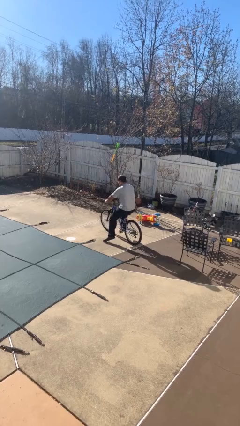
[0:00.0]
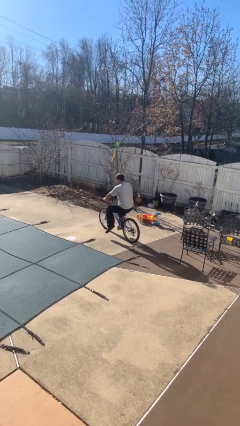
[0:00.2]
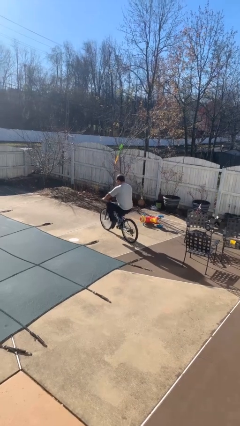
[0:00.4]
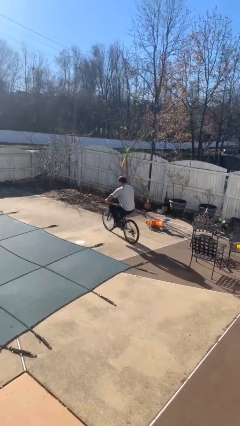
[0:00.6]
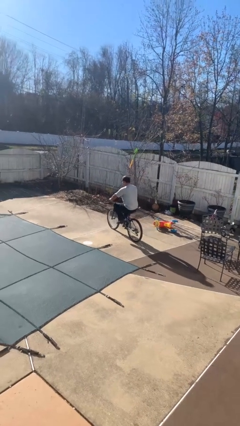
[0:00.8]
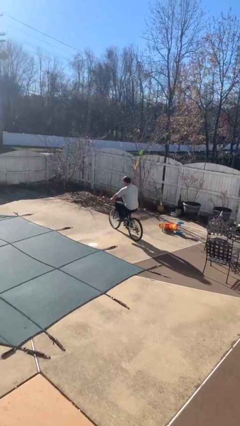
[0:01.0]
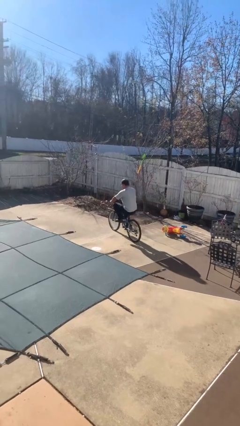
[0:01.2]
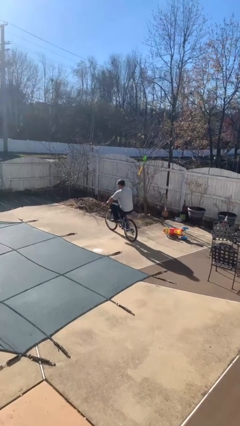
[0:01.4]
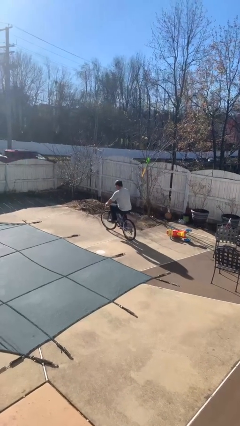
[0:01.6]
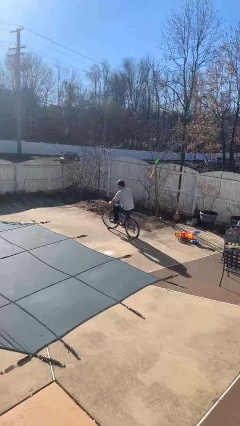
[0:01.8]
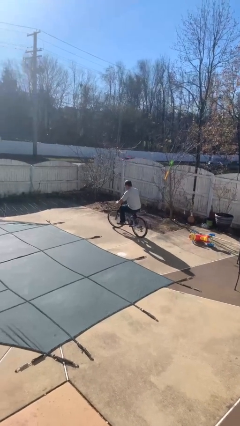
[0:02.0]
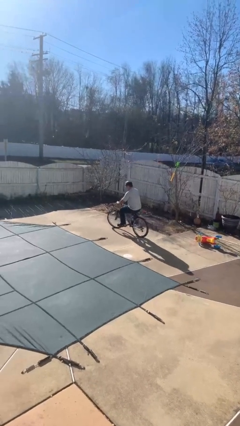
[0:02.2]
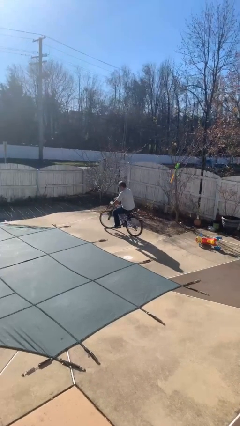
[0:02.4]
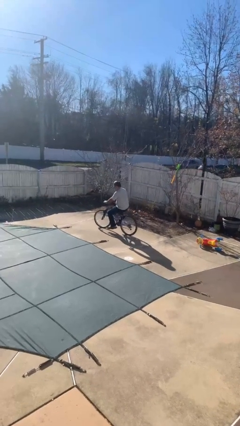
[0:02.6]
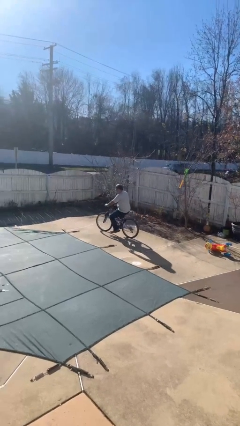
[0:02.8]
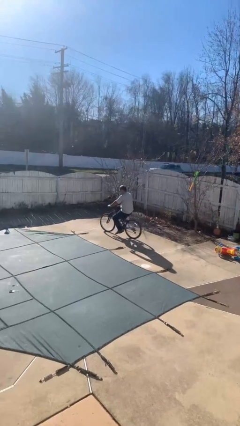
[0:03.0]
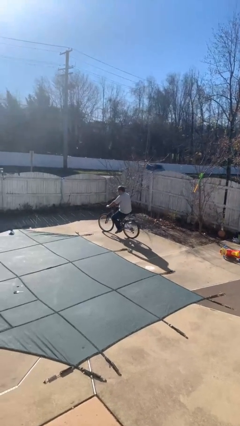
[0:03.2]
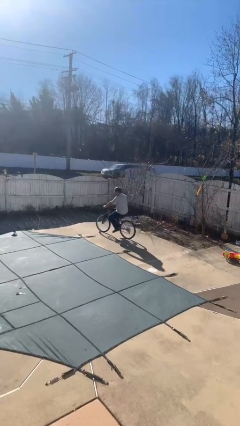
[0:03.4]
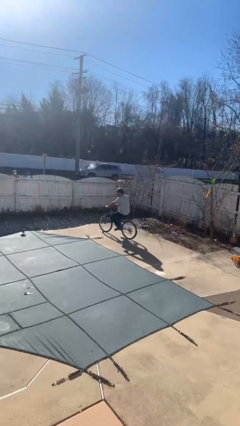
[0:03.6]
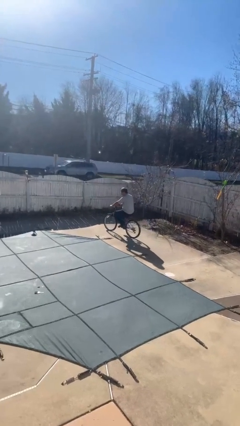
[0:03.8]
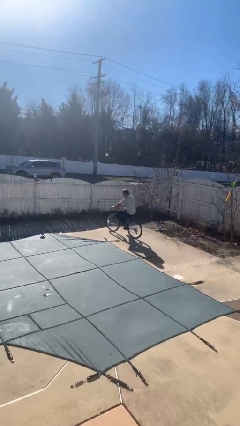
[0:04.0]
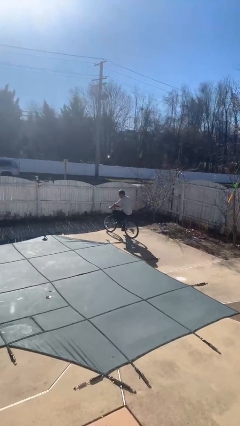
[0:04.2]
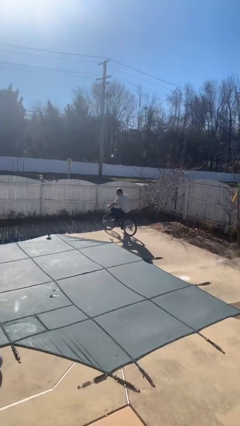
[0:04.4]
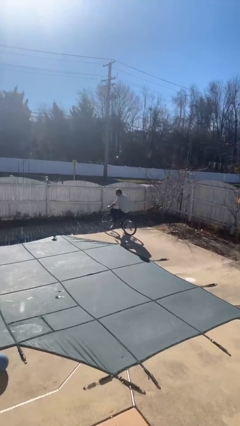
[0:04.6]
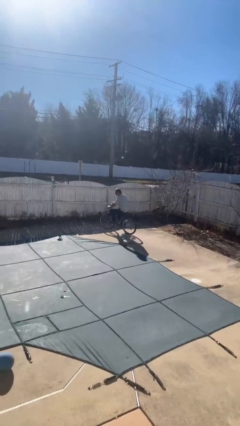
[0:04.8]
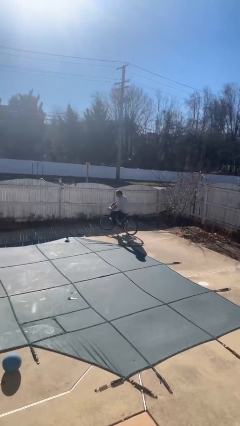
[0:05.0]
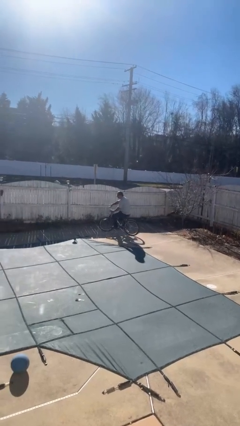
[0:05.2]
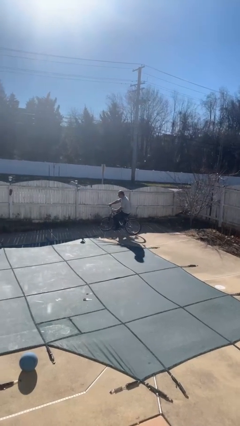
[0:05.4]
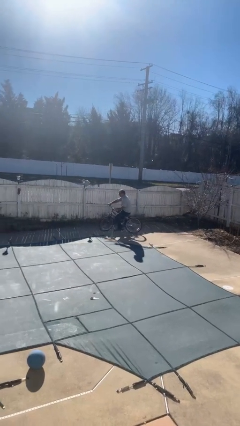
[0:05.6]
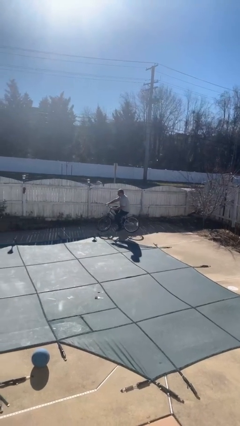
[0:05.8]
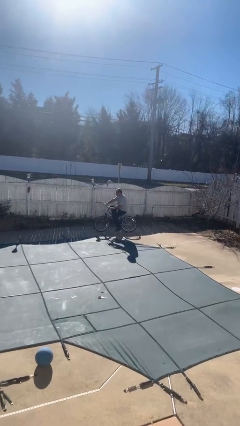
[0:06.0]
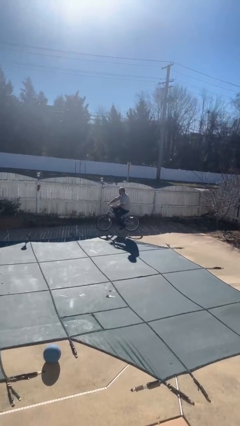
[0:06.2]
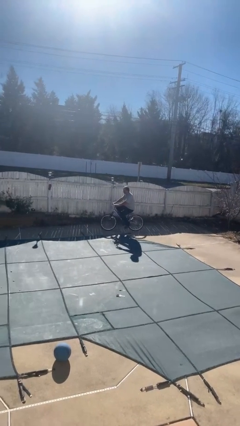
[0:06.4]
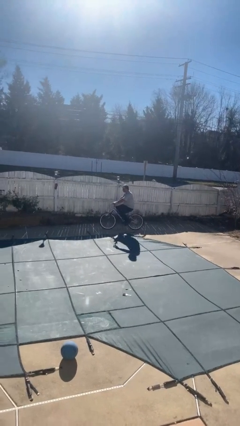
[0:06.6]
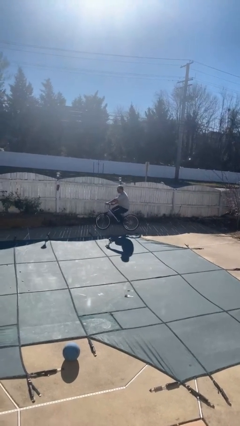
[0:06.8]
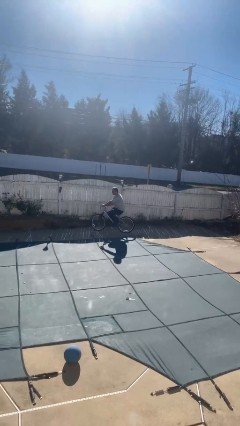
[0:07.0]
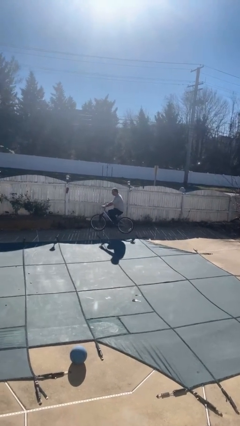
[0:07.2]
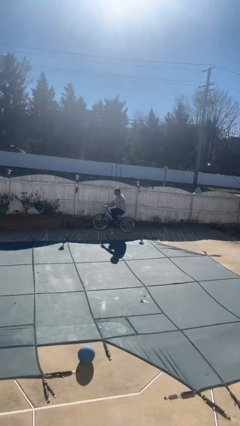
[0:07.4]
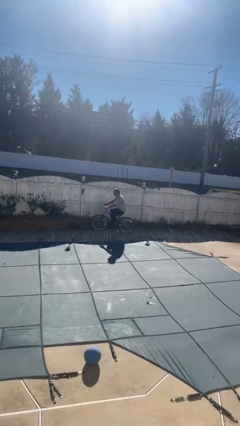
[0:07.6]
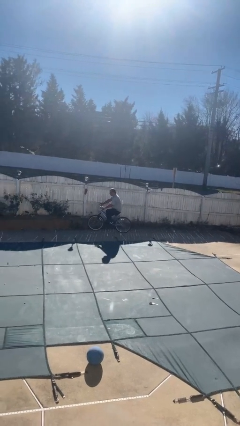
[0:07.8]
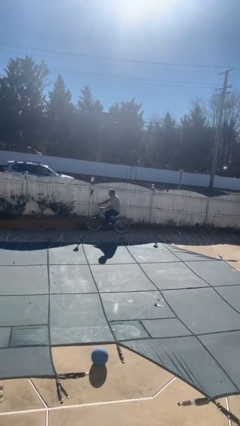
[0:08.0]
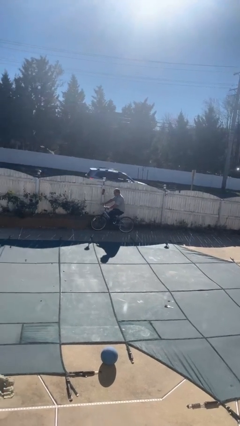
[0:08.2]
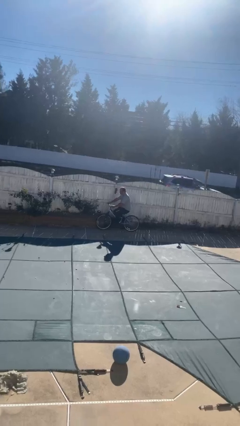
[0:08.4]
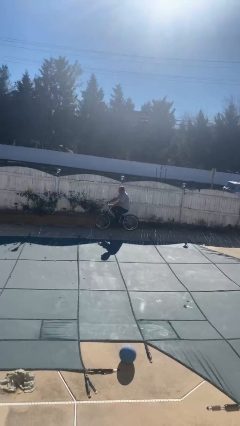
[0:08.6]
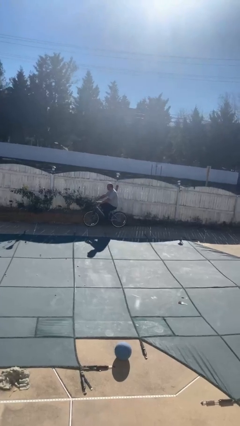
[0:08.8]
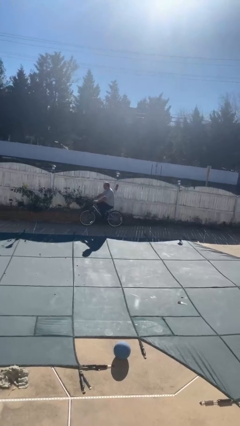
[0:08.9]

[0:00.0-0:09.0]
person rides bicycle

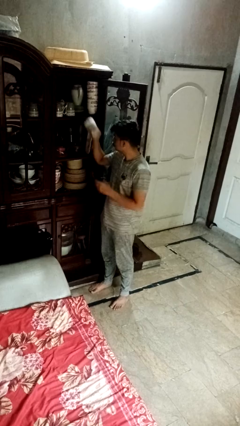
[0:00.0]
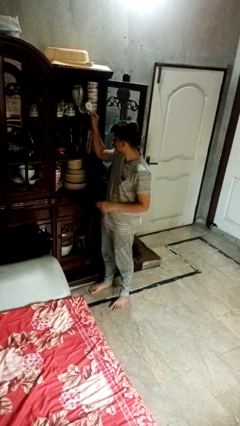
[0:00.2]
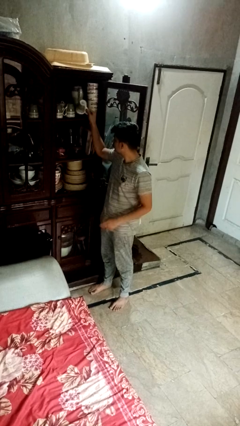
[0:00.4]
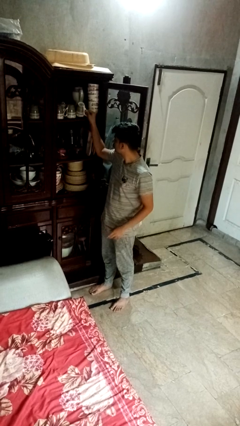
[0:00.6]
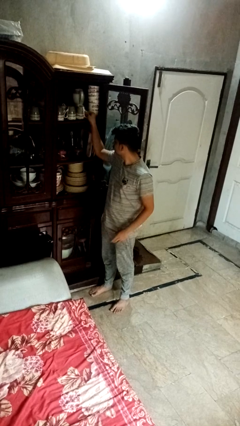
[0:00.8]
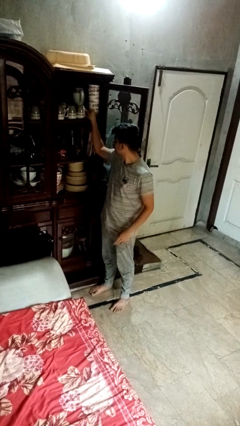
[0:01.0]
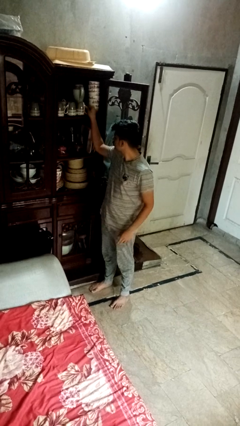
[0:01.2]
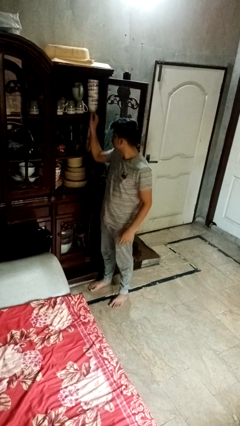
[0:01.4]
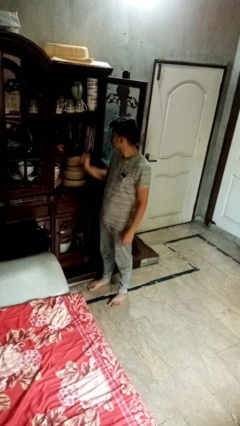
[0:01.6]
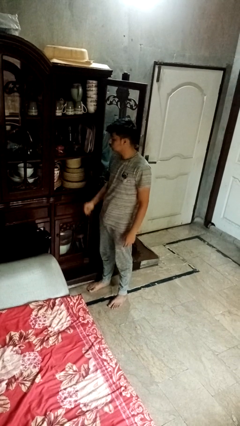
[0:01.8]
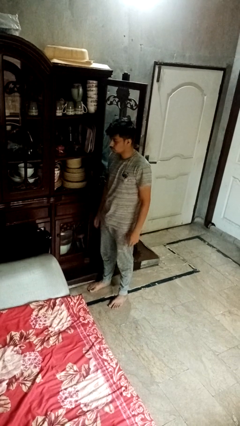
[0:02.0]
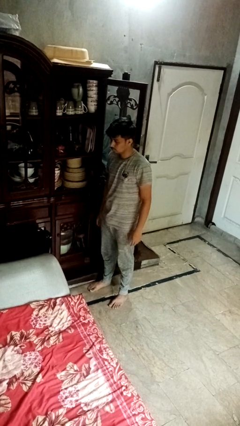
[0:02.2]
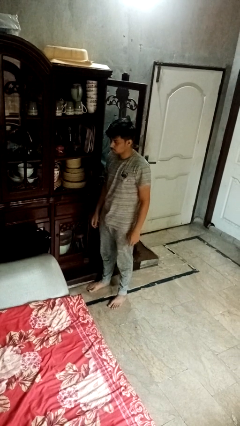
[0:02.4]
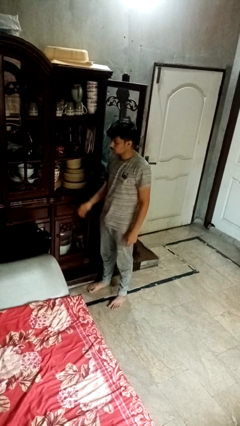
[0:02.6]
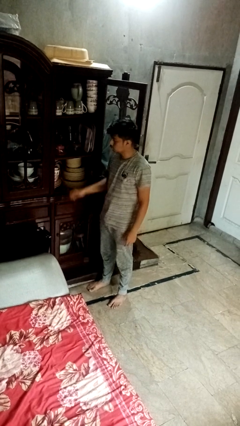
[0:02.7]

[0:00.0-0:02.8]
person puts object in cabinet

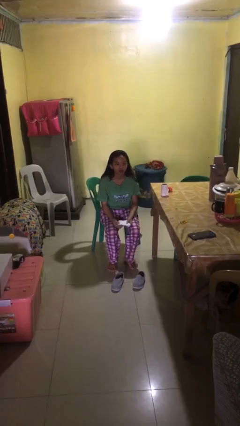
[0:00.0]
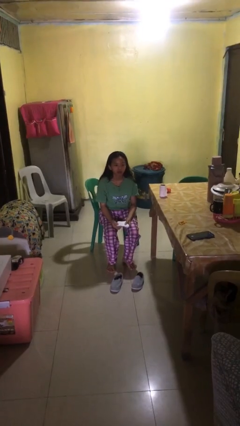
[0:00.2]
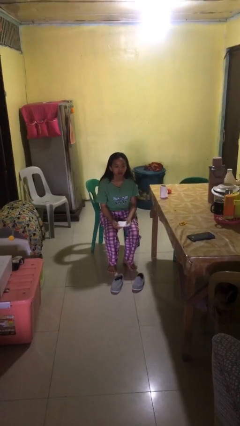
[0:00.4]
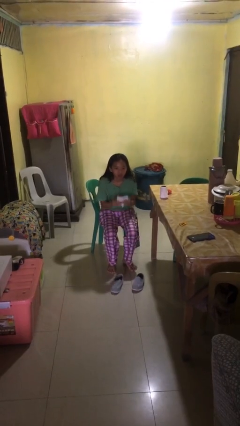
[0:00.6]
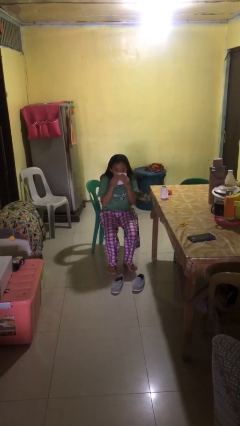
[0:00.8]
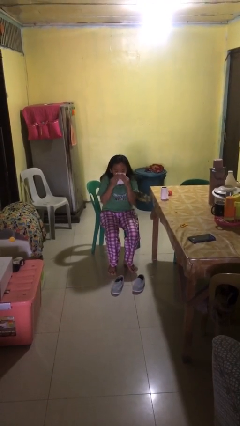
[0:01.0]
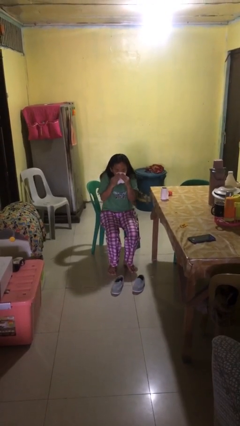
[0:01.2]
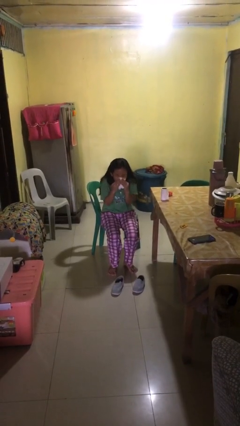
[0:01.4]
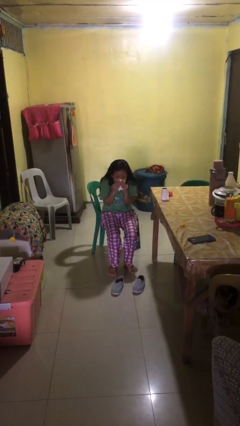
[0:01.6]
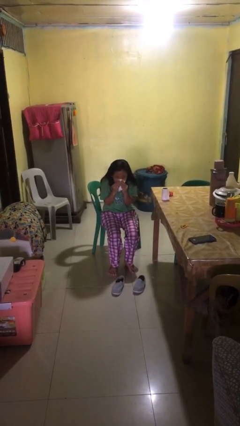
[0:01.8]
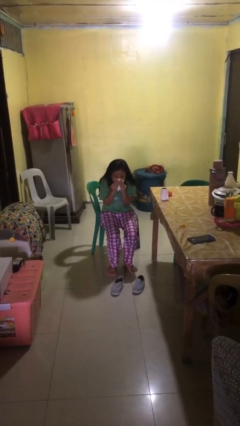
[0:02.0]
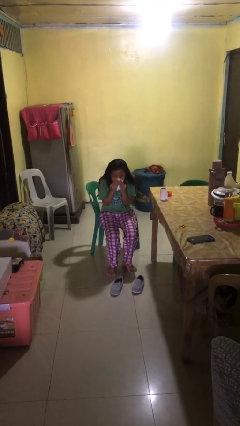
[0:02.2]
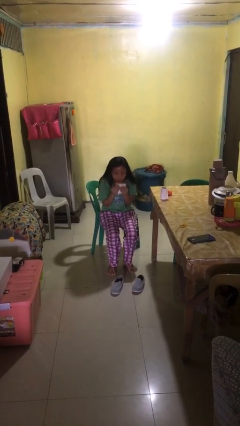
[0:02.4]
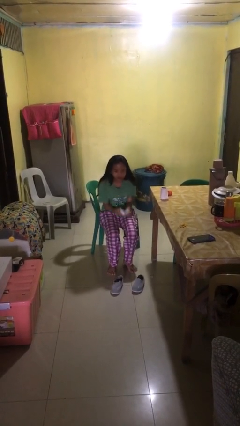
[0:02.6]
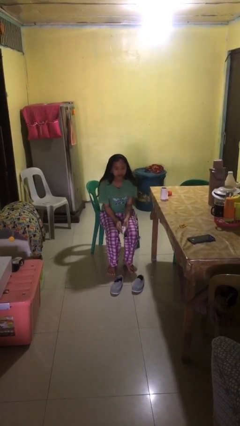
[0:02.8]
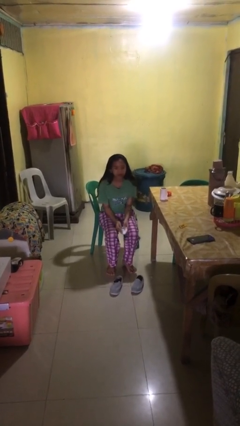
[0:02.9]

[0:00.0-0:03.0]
person blows nose

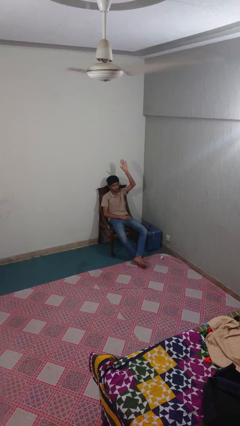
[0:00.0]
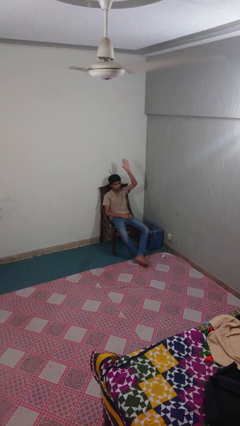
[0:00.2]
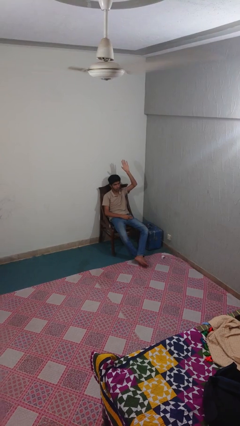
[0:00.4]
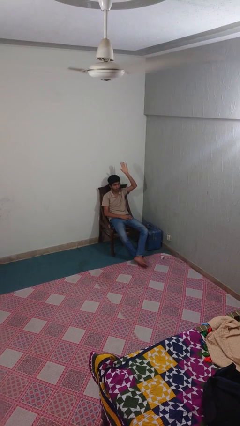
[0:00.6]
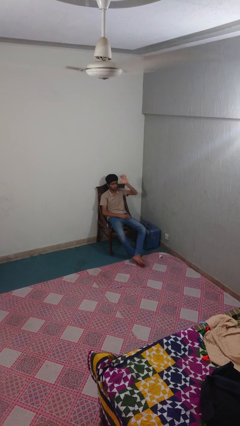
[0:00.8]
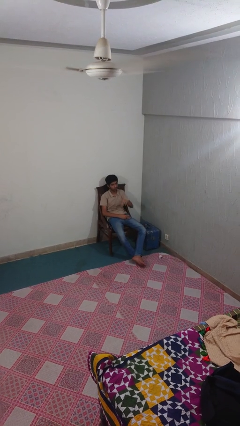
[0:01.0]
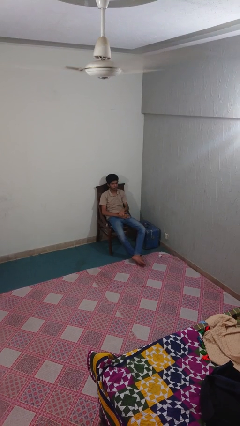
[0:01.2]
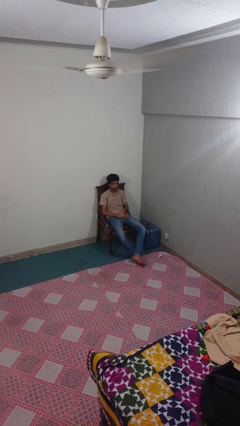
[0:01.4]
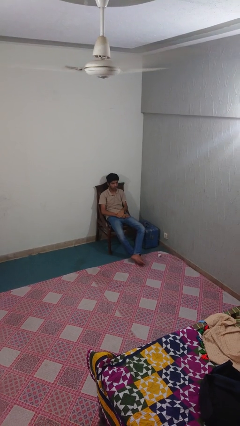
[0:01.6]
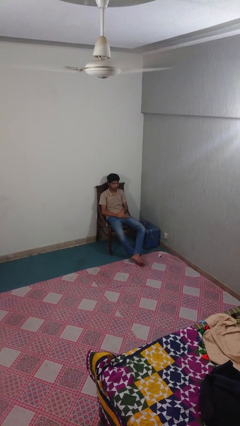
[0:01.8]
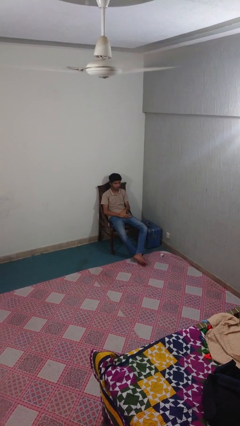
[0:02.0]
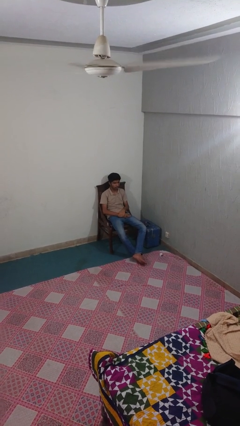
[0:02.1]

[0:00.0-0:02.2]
person gestures lower hand

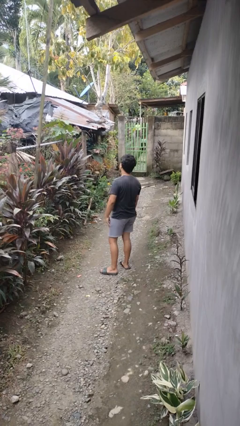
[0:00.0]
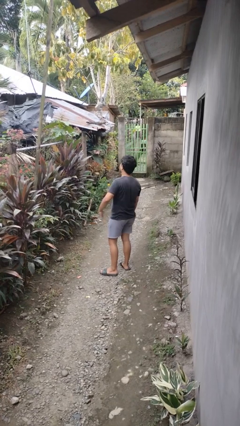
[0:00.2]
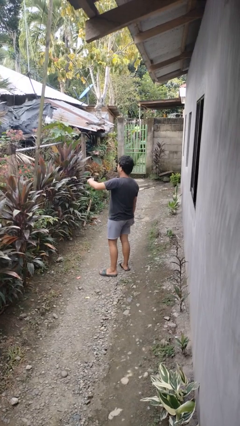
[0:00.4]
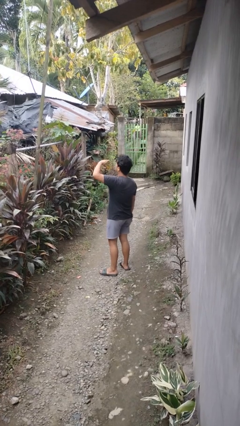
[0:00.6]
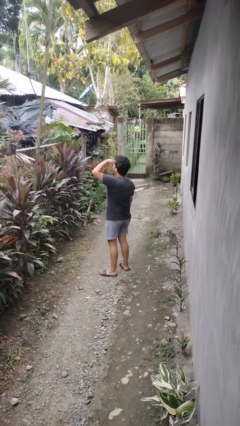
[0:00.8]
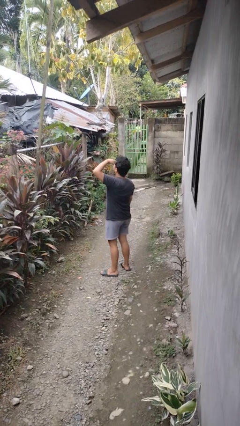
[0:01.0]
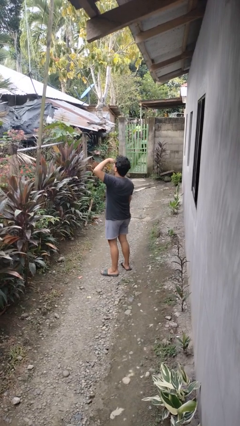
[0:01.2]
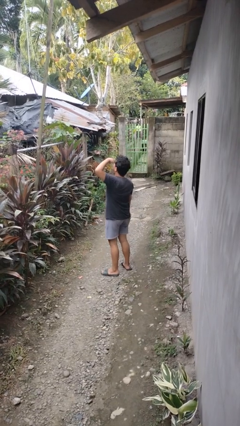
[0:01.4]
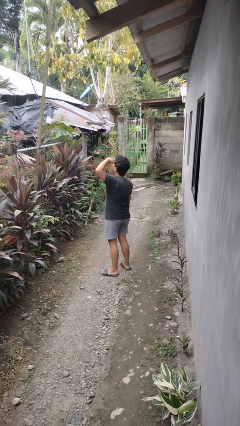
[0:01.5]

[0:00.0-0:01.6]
person shades eyes
